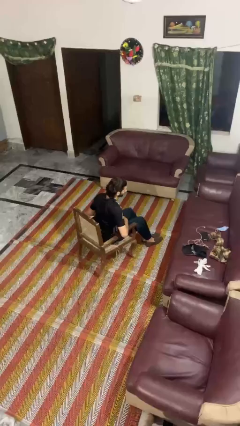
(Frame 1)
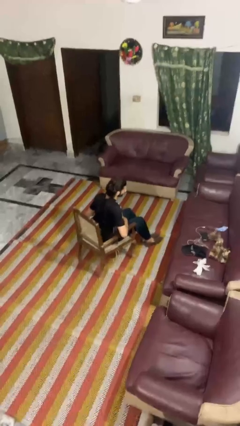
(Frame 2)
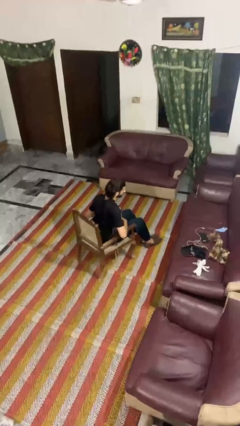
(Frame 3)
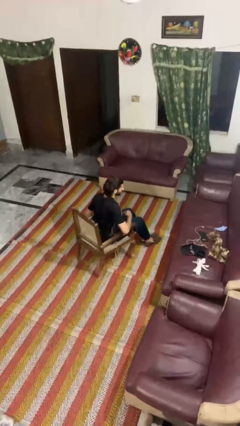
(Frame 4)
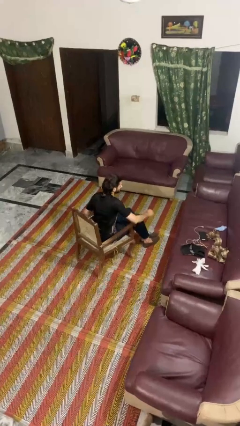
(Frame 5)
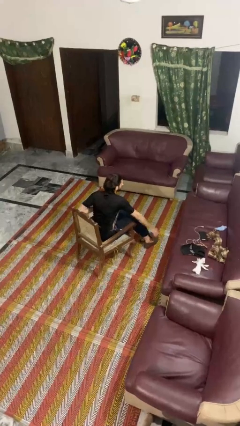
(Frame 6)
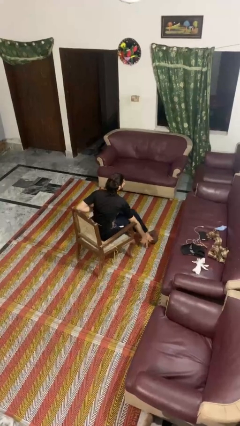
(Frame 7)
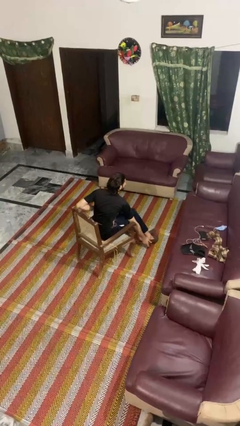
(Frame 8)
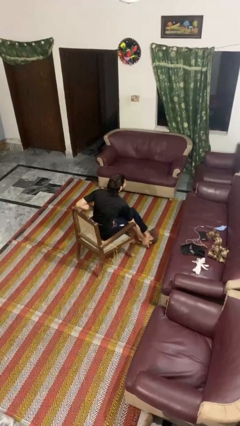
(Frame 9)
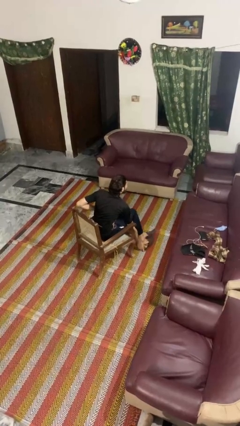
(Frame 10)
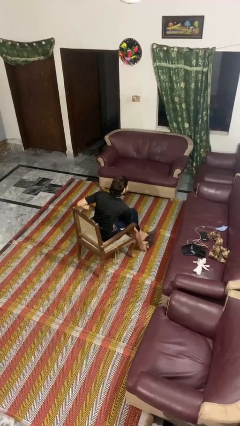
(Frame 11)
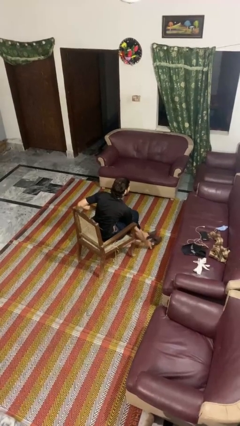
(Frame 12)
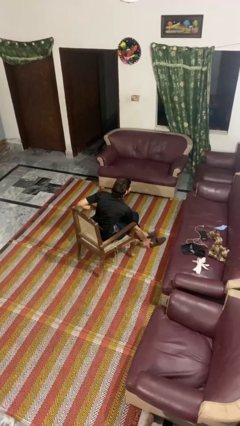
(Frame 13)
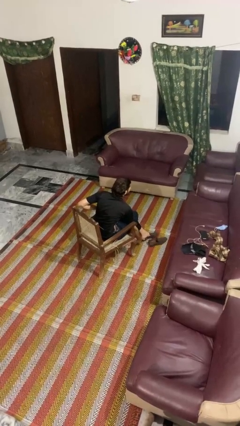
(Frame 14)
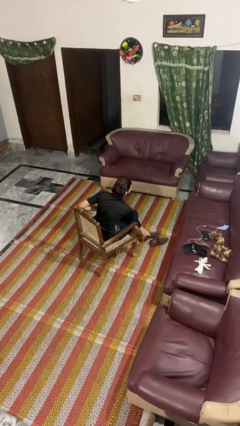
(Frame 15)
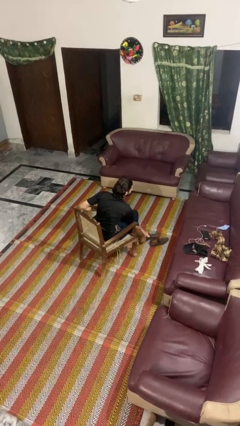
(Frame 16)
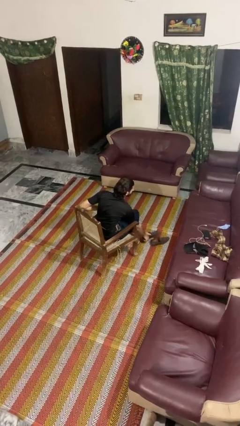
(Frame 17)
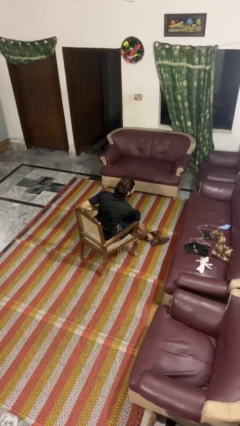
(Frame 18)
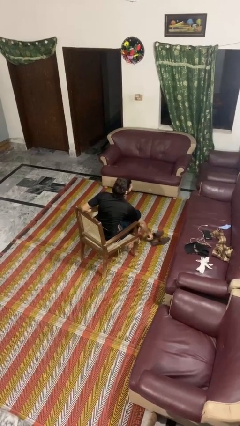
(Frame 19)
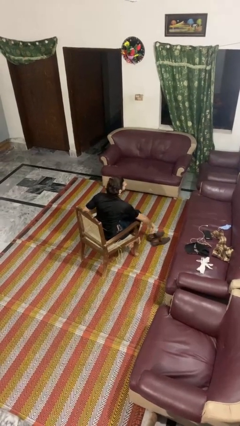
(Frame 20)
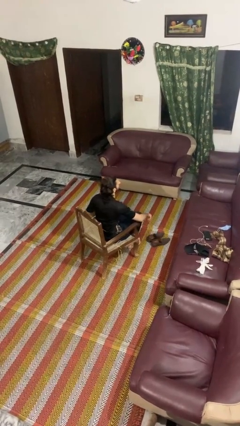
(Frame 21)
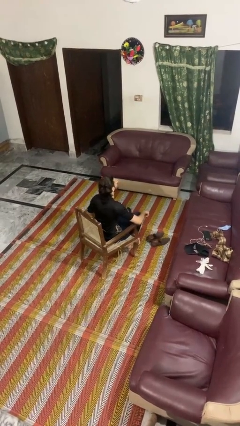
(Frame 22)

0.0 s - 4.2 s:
person takes off shoes

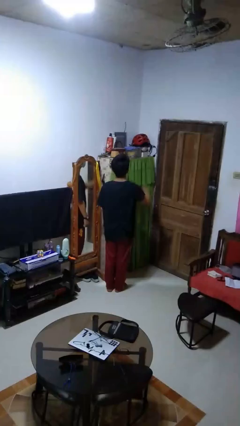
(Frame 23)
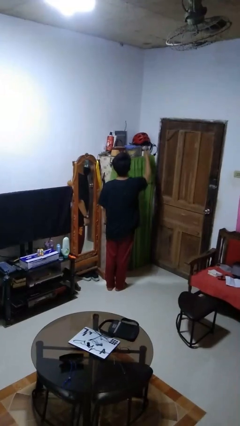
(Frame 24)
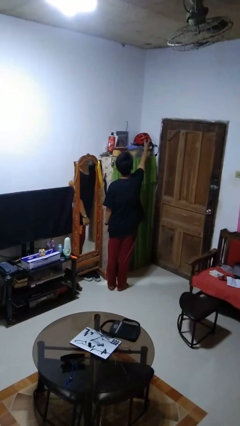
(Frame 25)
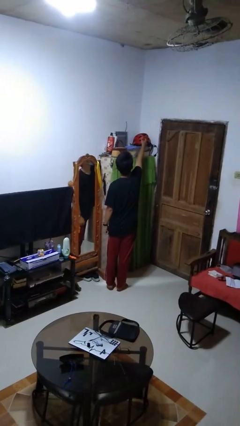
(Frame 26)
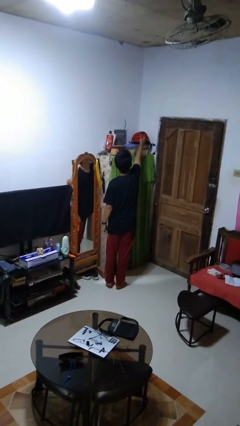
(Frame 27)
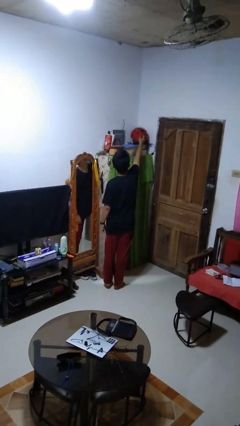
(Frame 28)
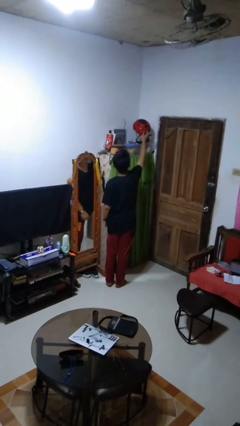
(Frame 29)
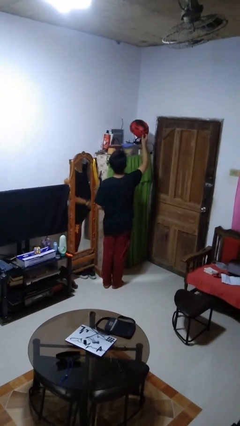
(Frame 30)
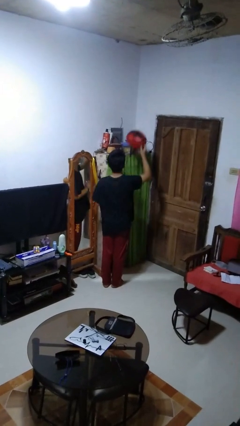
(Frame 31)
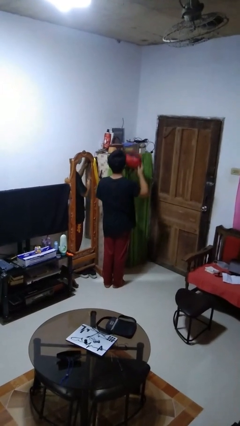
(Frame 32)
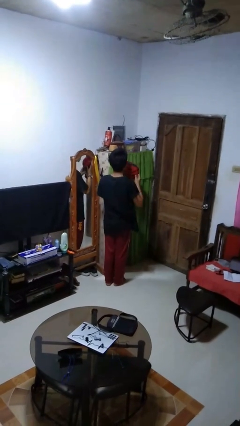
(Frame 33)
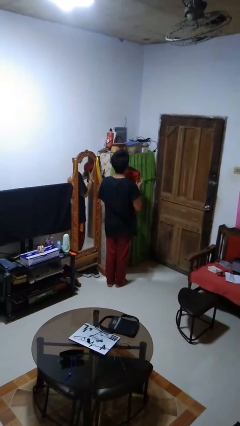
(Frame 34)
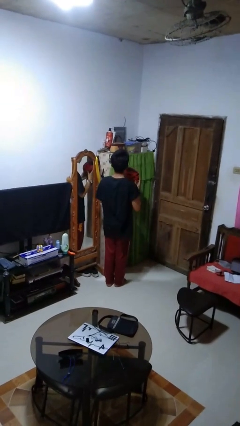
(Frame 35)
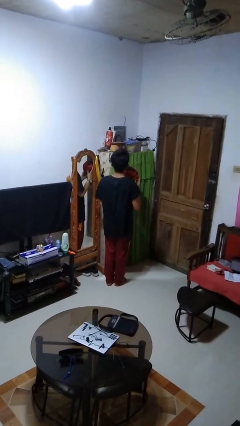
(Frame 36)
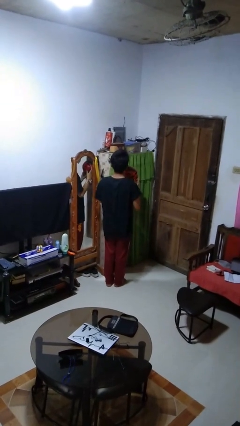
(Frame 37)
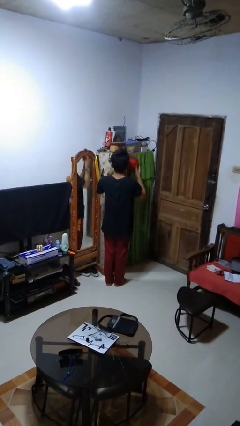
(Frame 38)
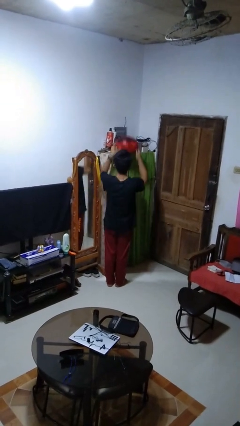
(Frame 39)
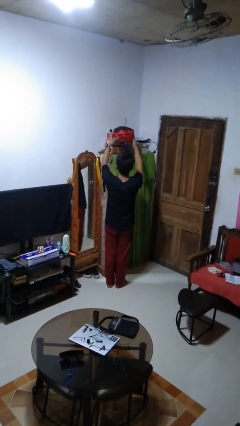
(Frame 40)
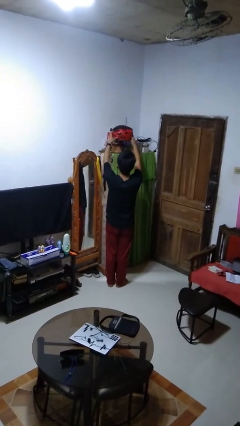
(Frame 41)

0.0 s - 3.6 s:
person picks up object from shelf

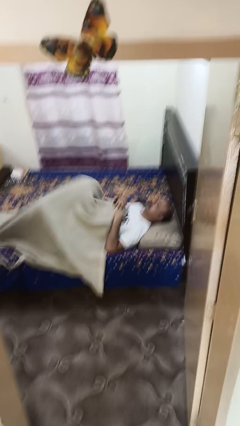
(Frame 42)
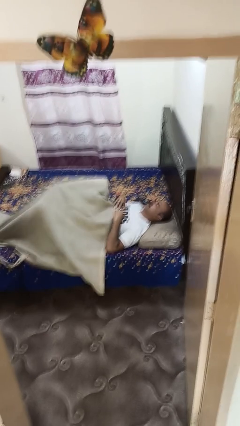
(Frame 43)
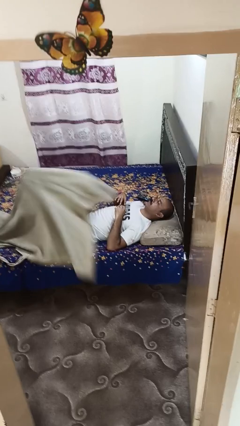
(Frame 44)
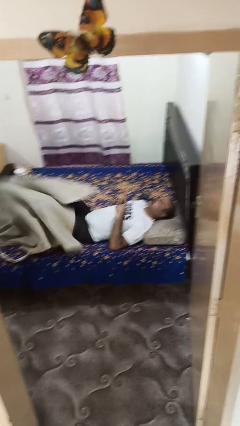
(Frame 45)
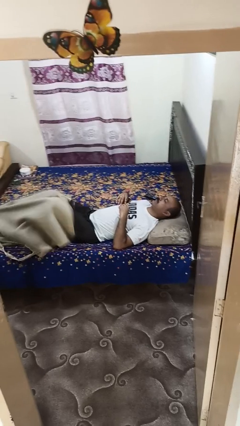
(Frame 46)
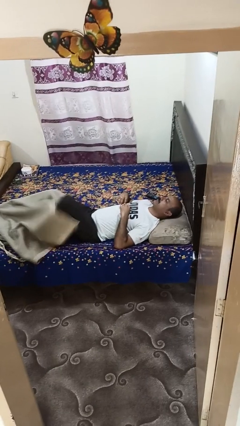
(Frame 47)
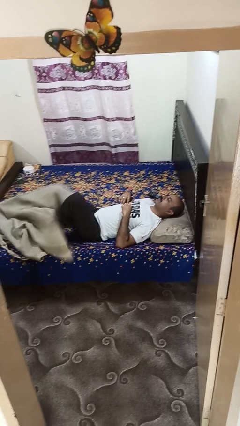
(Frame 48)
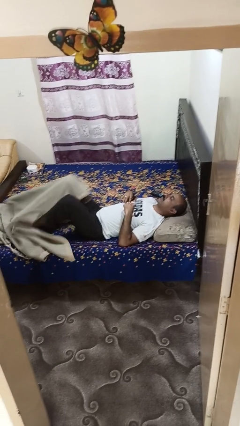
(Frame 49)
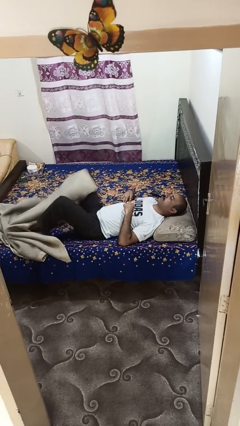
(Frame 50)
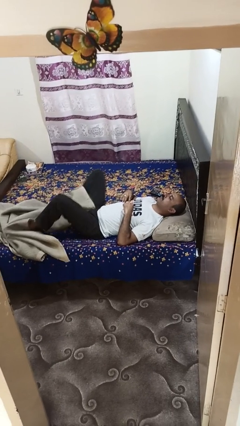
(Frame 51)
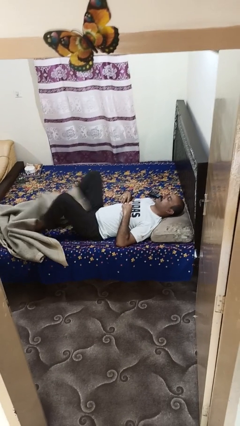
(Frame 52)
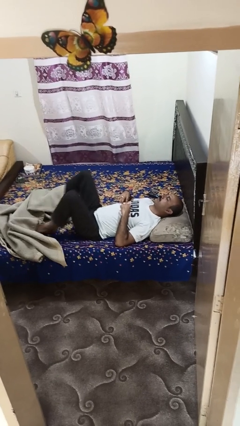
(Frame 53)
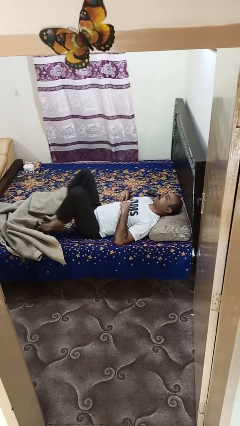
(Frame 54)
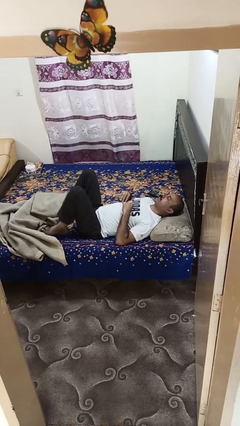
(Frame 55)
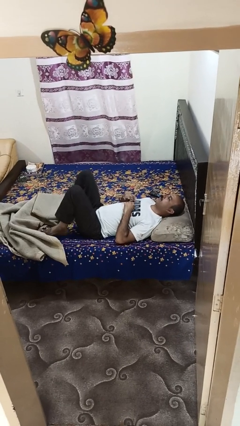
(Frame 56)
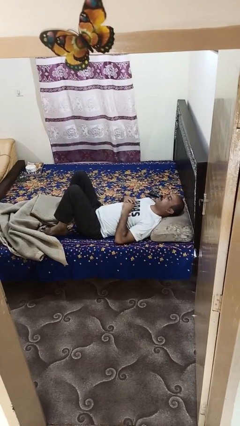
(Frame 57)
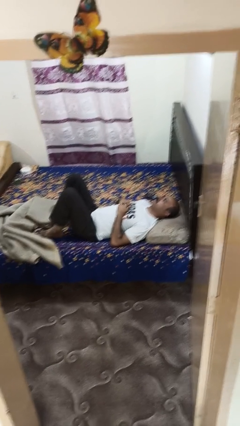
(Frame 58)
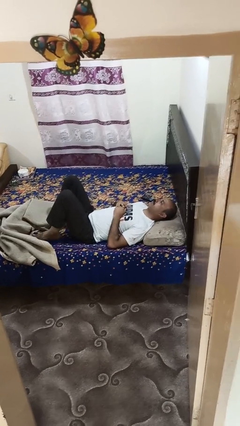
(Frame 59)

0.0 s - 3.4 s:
person uncovers with bedsheets

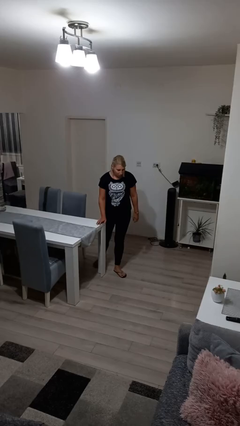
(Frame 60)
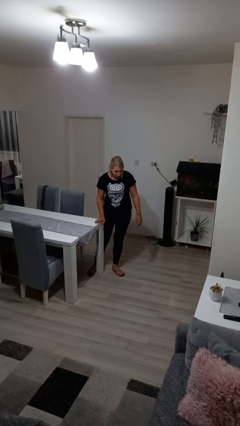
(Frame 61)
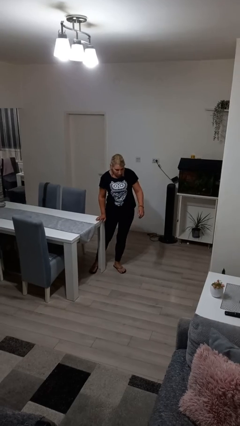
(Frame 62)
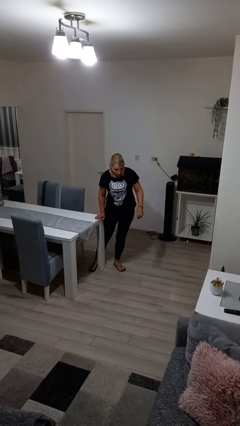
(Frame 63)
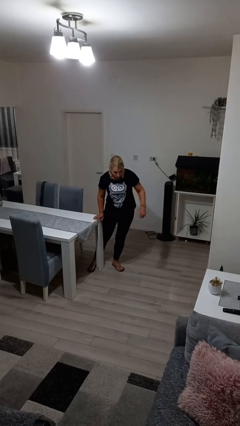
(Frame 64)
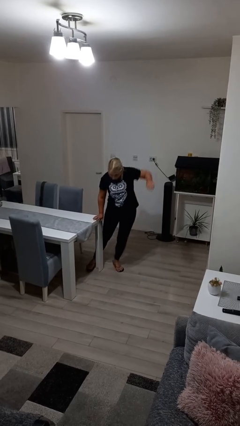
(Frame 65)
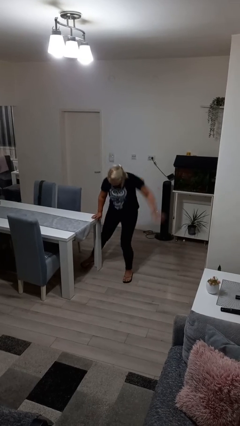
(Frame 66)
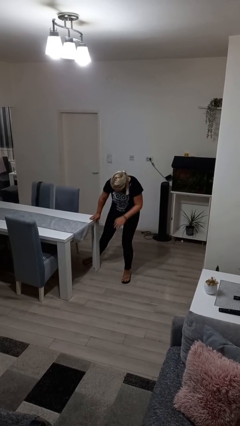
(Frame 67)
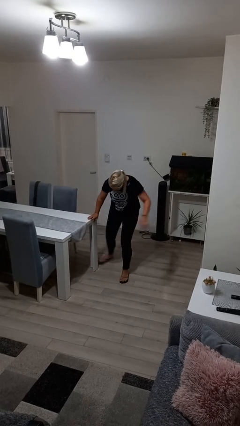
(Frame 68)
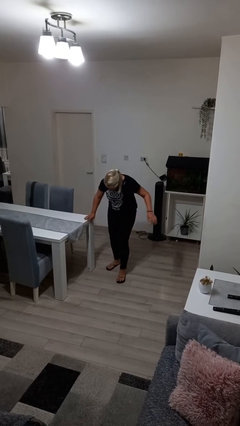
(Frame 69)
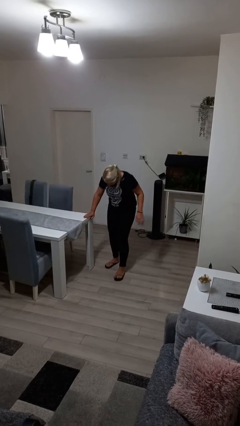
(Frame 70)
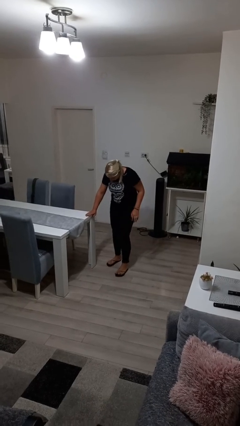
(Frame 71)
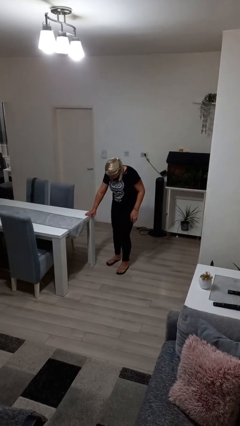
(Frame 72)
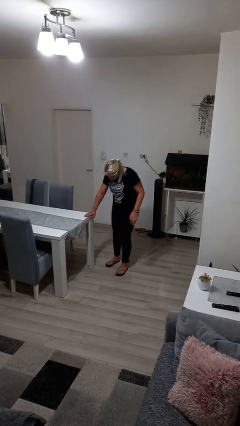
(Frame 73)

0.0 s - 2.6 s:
person bumps into table

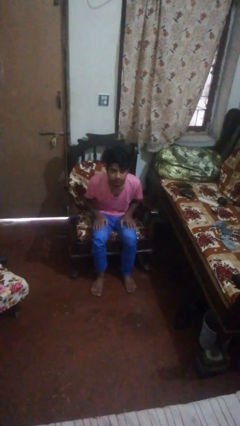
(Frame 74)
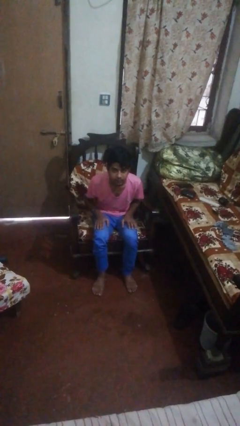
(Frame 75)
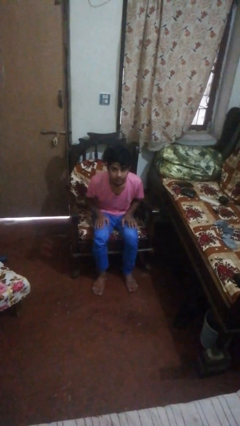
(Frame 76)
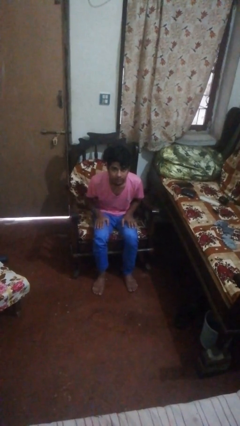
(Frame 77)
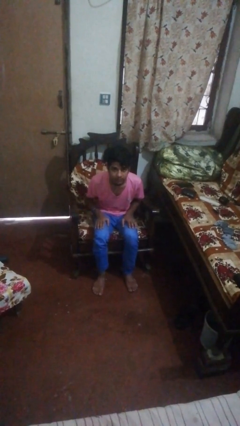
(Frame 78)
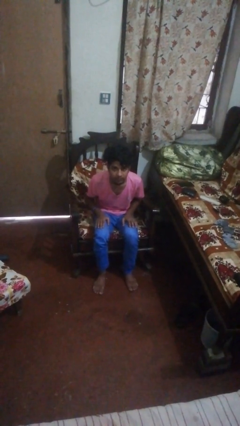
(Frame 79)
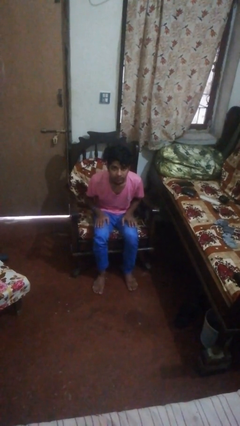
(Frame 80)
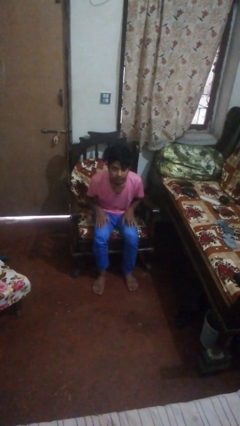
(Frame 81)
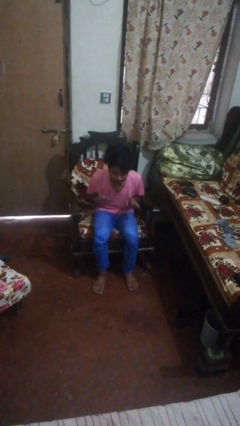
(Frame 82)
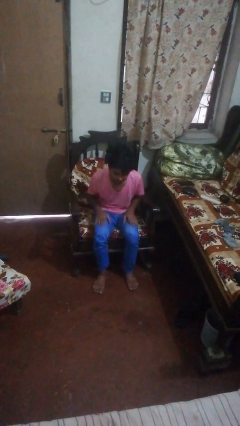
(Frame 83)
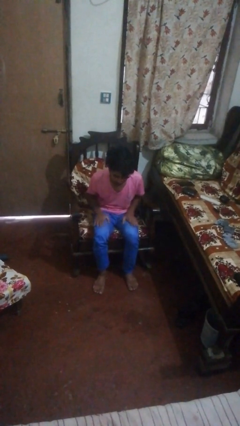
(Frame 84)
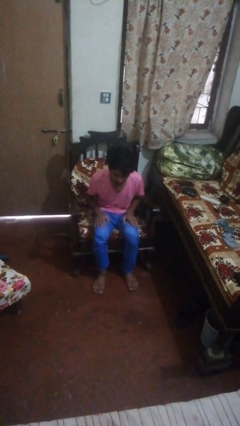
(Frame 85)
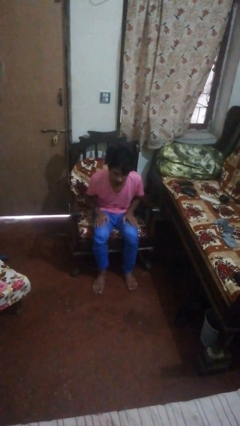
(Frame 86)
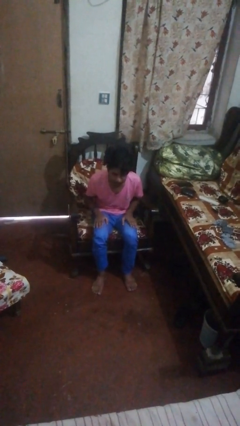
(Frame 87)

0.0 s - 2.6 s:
person slaps hands on thighs

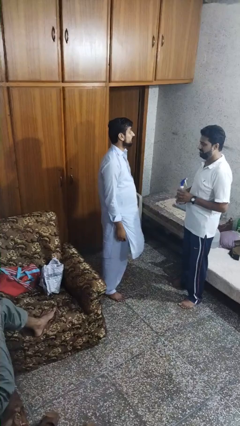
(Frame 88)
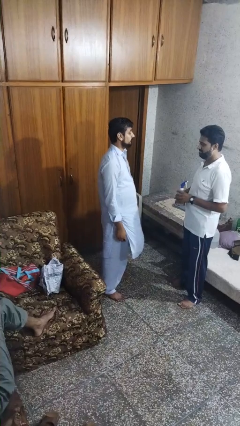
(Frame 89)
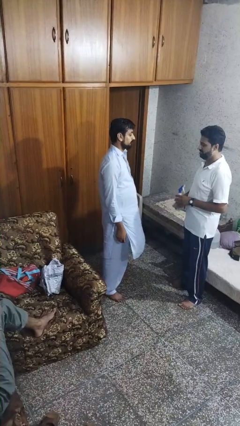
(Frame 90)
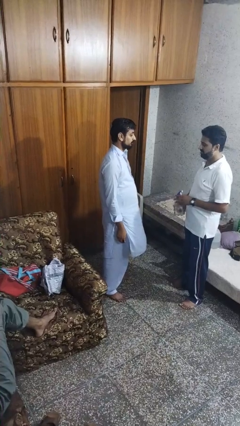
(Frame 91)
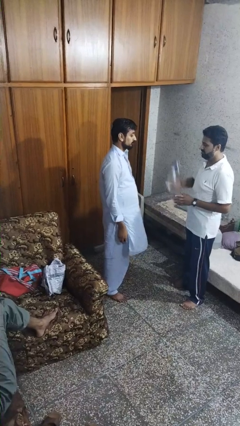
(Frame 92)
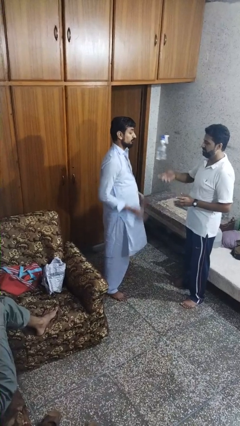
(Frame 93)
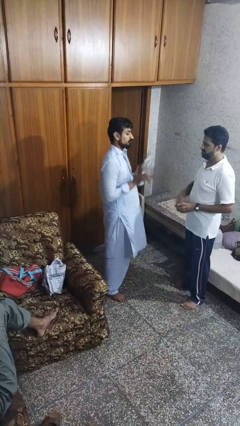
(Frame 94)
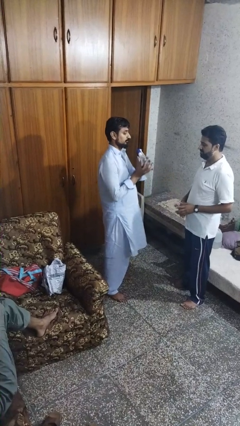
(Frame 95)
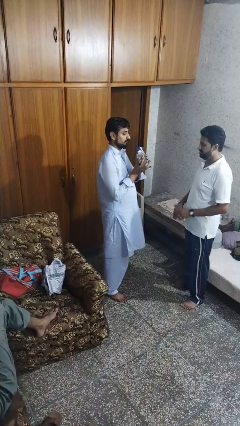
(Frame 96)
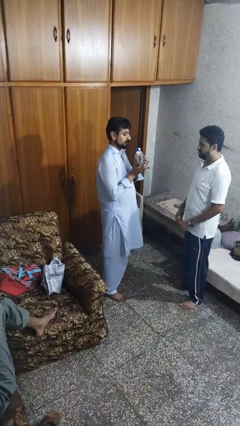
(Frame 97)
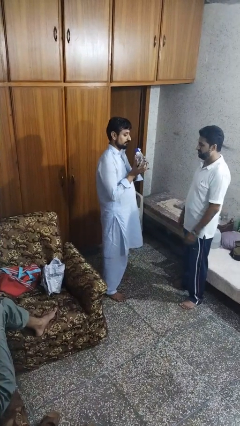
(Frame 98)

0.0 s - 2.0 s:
person catches object from person
